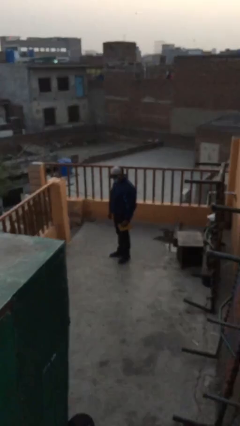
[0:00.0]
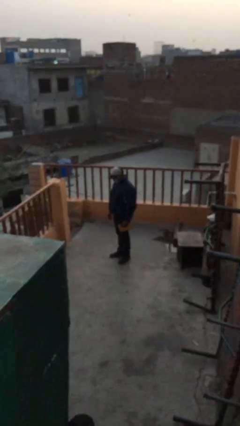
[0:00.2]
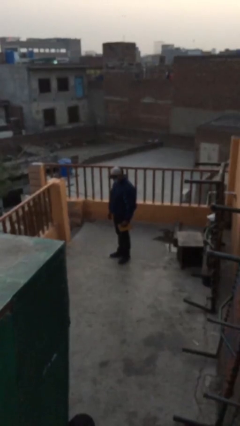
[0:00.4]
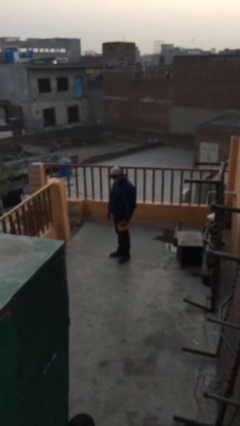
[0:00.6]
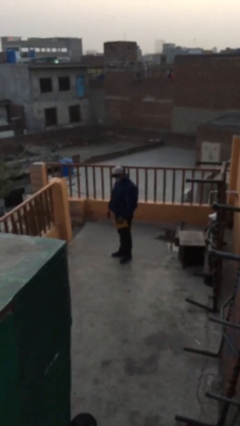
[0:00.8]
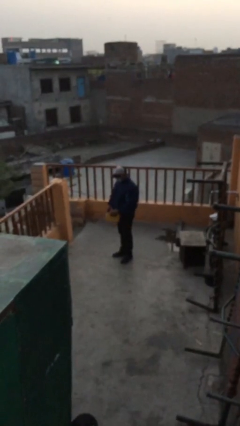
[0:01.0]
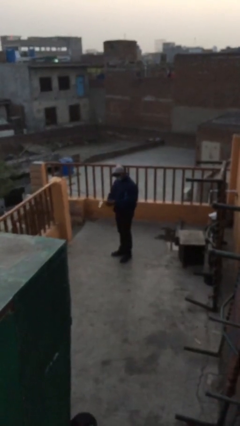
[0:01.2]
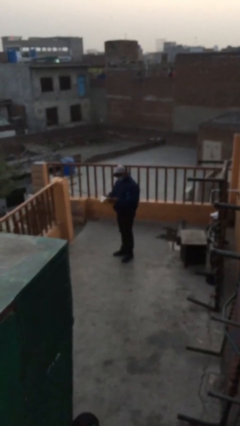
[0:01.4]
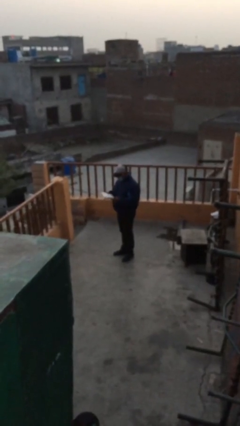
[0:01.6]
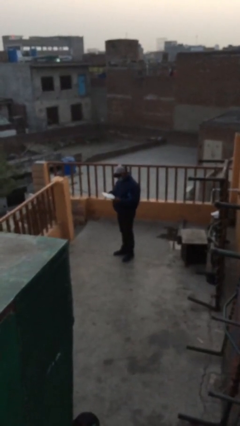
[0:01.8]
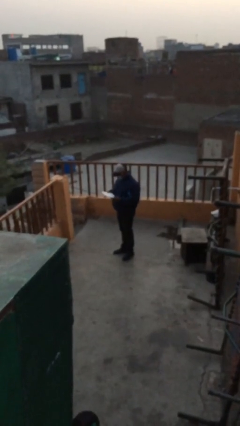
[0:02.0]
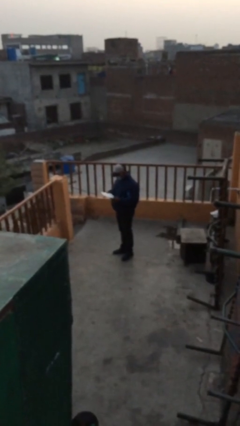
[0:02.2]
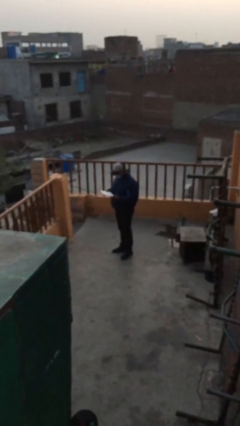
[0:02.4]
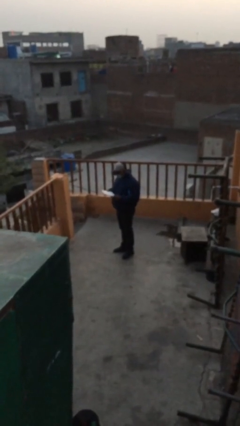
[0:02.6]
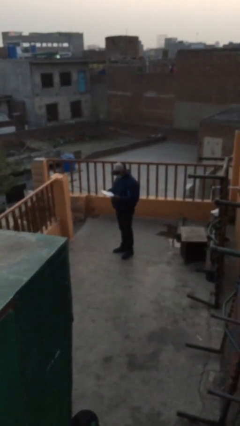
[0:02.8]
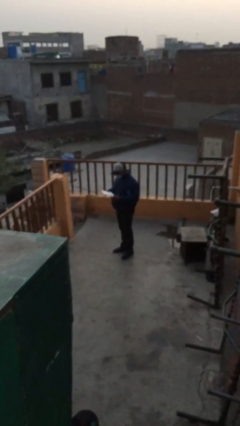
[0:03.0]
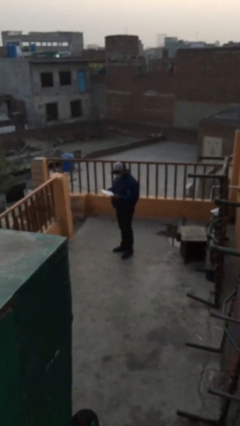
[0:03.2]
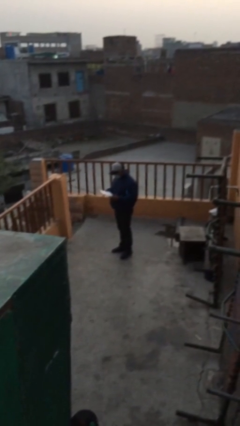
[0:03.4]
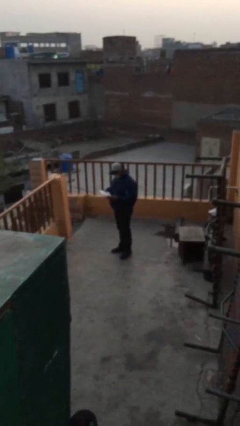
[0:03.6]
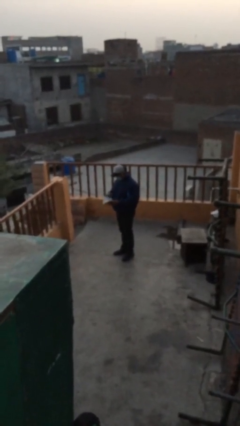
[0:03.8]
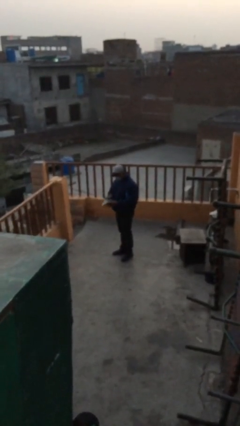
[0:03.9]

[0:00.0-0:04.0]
person reads document

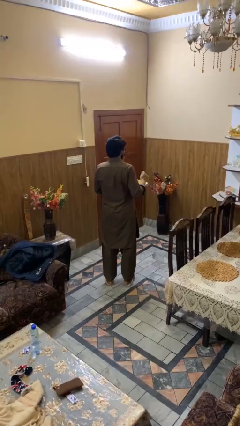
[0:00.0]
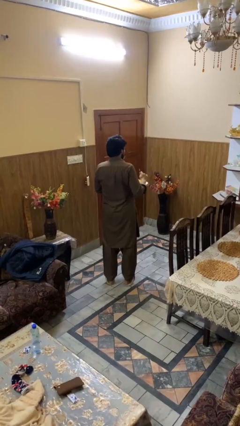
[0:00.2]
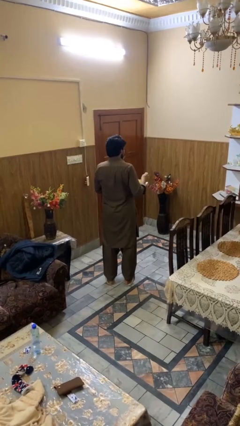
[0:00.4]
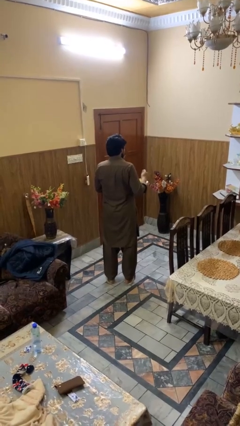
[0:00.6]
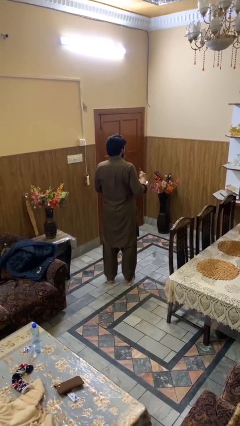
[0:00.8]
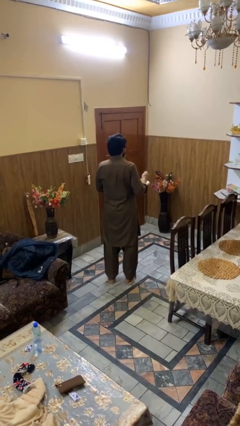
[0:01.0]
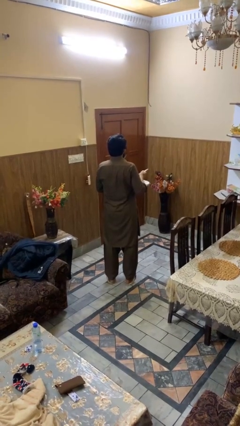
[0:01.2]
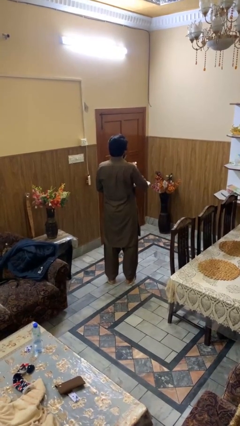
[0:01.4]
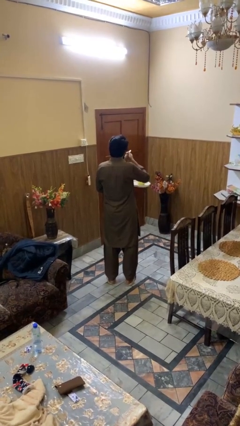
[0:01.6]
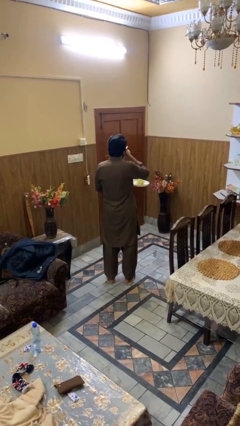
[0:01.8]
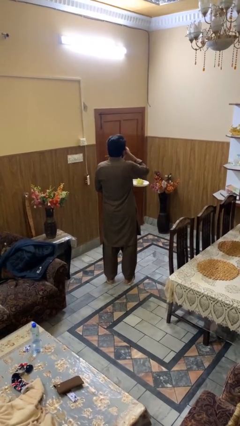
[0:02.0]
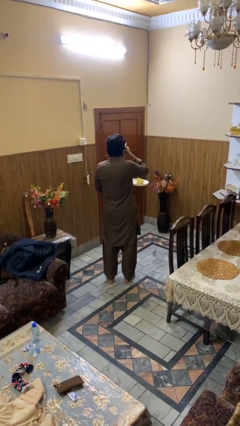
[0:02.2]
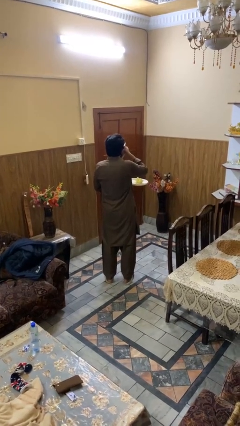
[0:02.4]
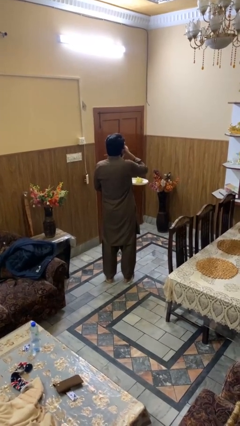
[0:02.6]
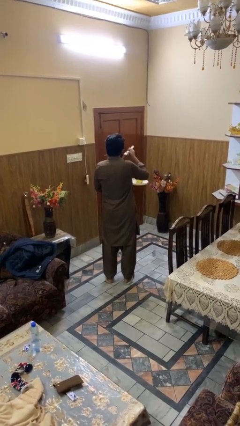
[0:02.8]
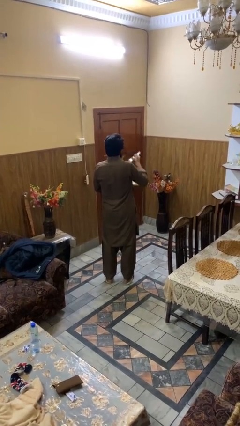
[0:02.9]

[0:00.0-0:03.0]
person eats with utensil

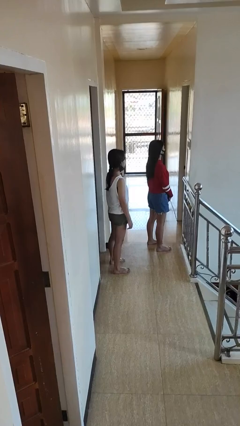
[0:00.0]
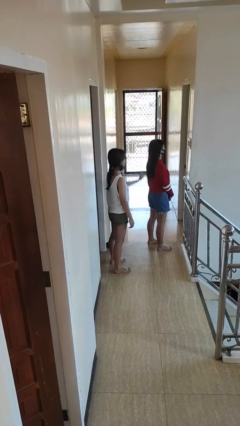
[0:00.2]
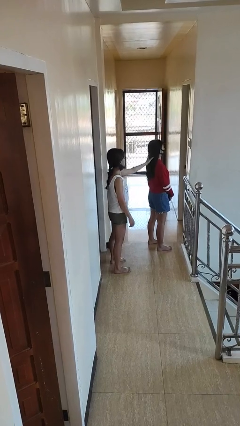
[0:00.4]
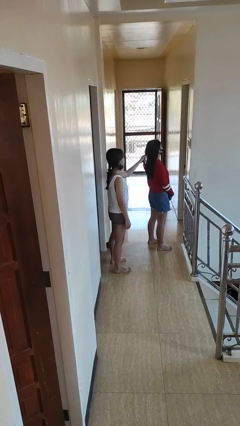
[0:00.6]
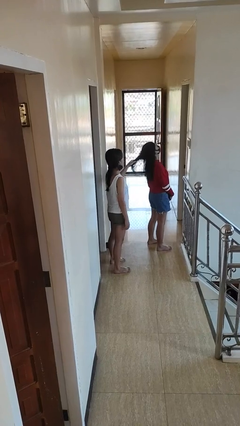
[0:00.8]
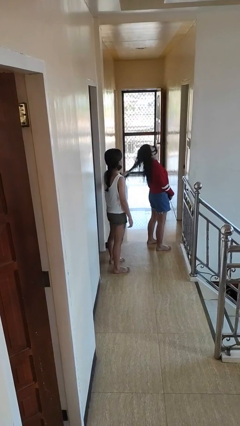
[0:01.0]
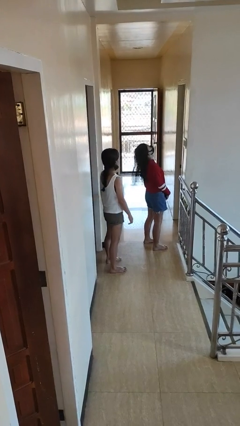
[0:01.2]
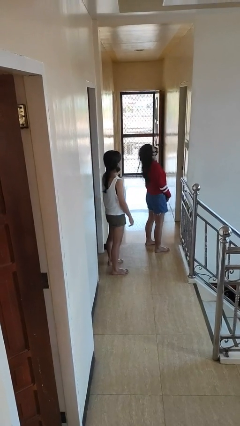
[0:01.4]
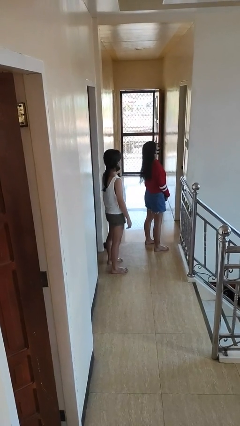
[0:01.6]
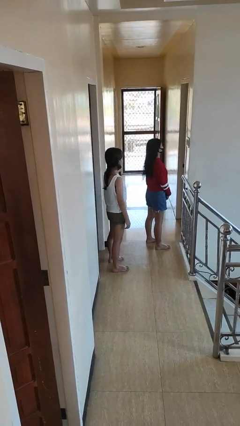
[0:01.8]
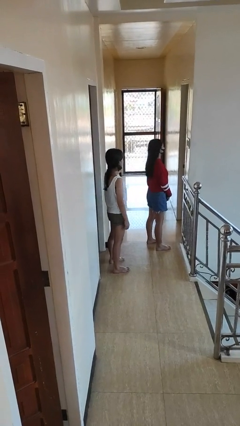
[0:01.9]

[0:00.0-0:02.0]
person grabs person by hair

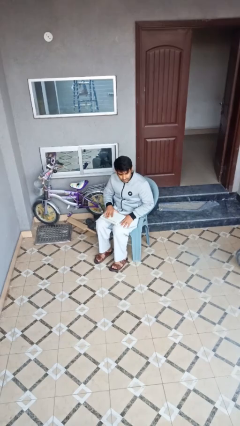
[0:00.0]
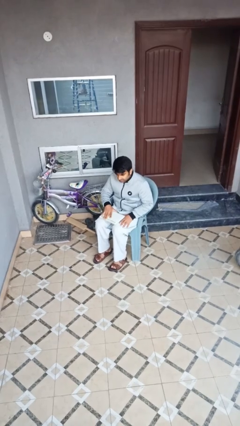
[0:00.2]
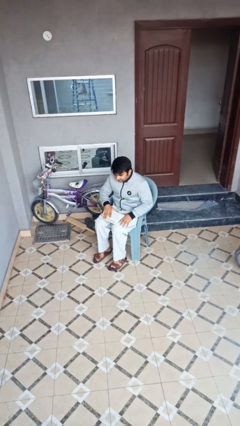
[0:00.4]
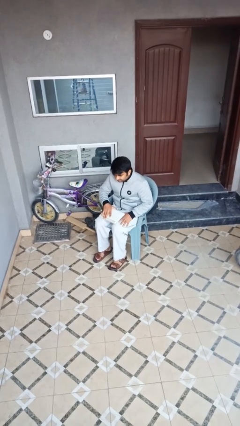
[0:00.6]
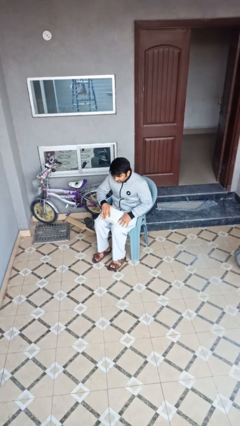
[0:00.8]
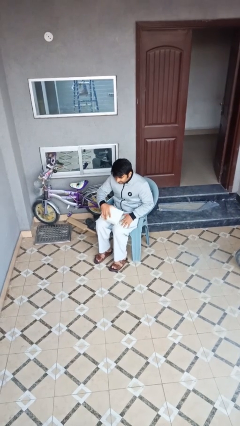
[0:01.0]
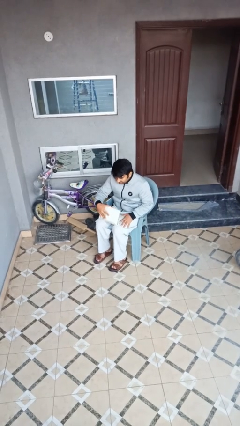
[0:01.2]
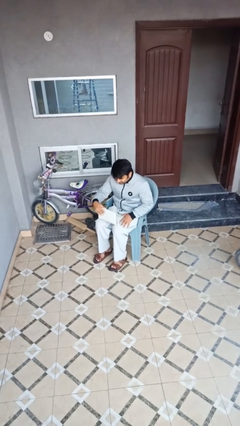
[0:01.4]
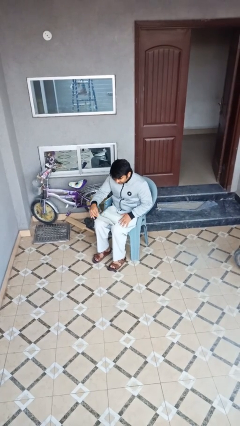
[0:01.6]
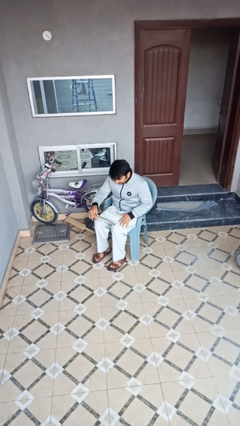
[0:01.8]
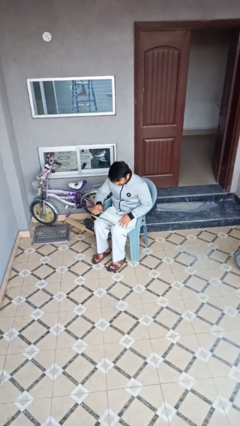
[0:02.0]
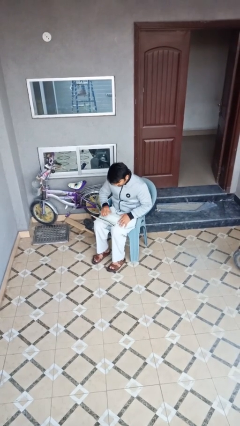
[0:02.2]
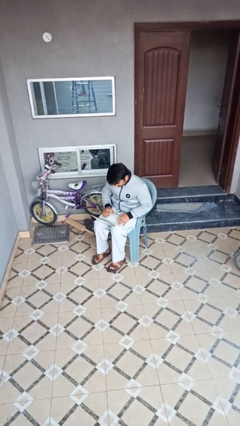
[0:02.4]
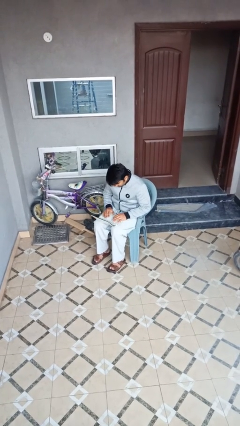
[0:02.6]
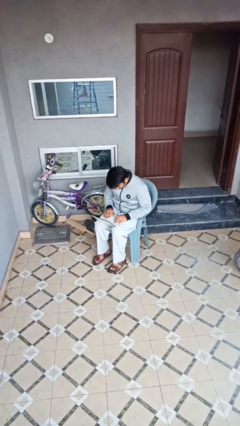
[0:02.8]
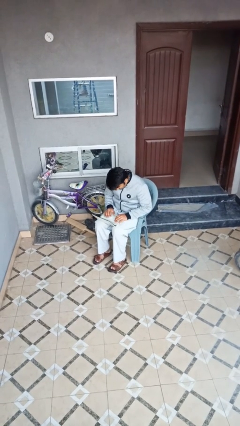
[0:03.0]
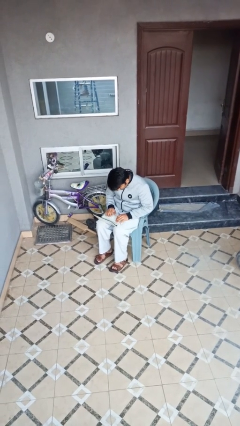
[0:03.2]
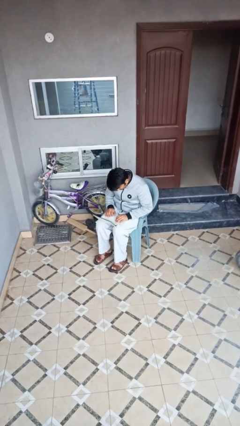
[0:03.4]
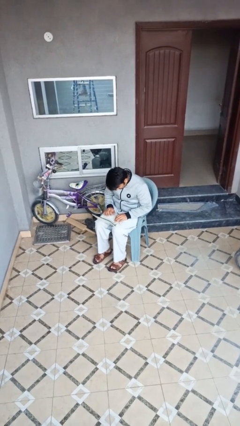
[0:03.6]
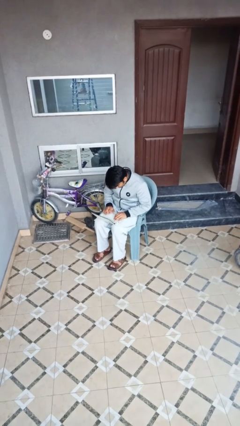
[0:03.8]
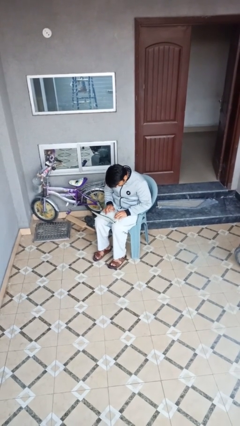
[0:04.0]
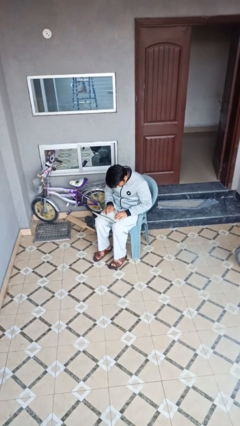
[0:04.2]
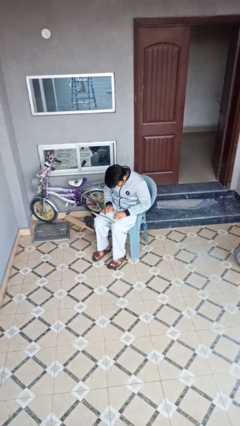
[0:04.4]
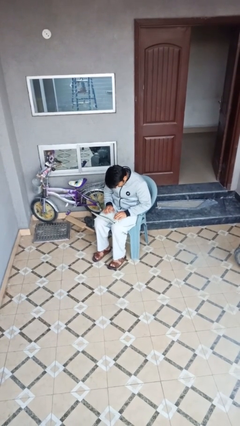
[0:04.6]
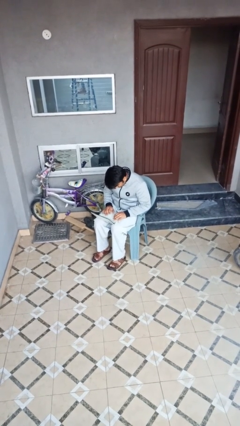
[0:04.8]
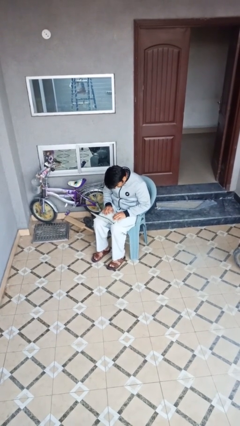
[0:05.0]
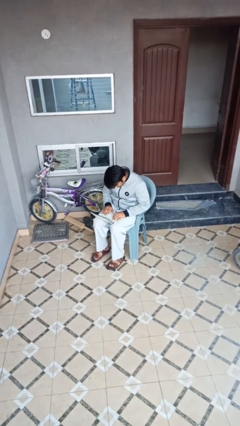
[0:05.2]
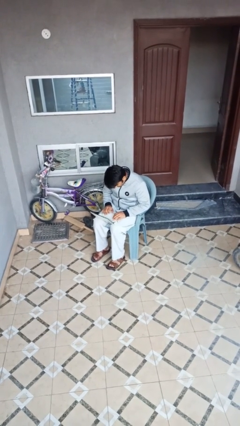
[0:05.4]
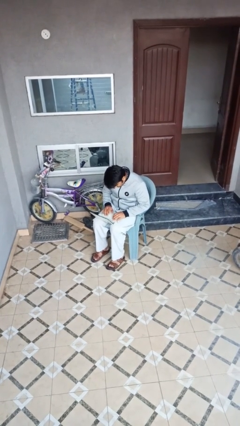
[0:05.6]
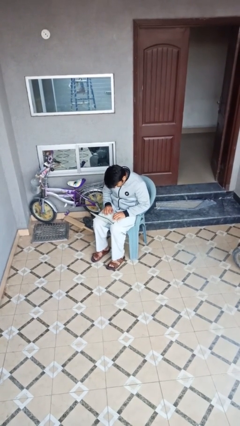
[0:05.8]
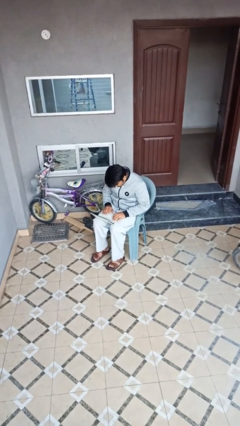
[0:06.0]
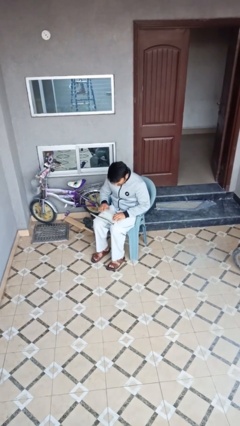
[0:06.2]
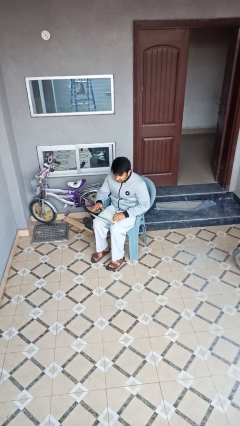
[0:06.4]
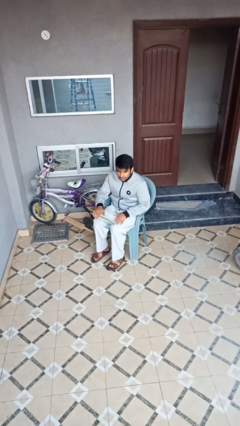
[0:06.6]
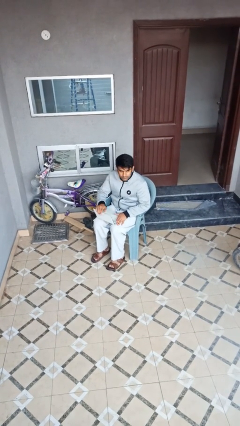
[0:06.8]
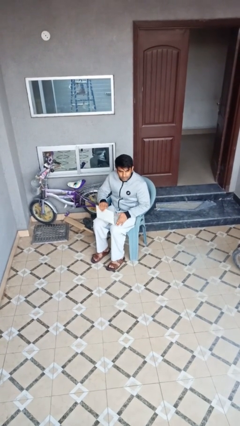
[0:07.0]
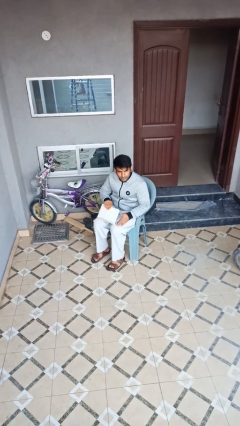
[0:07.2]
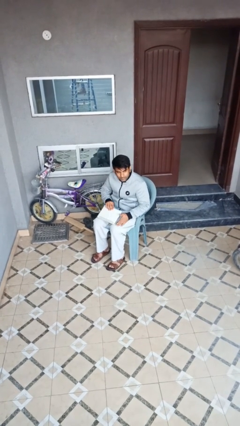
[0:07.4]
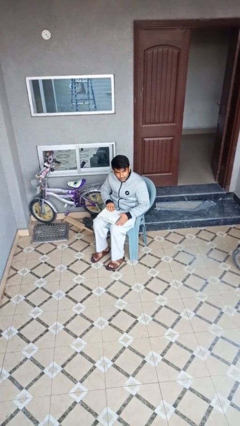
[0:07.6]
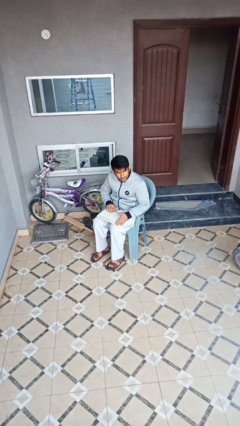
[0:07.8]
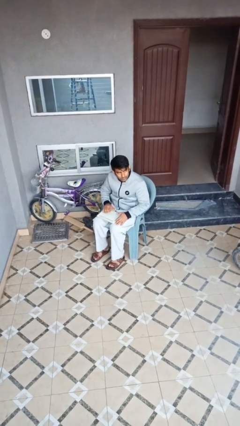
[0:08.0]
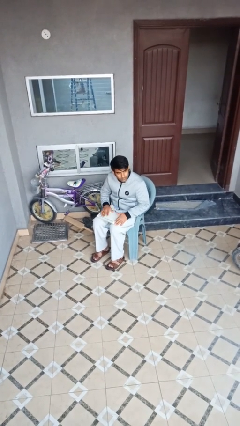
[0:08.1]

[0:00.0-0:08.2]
person interacts with laptop

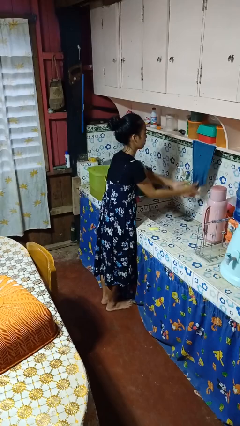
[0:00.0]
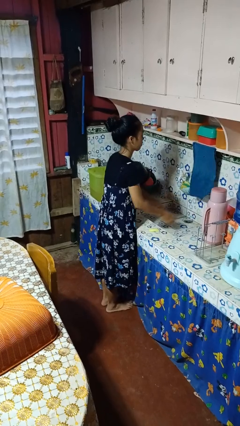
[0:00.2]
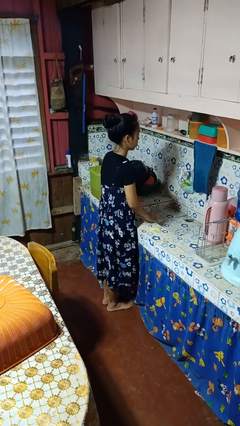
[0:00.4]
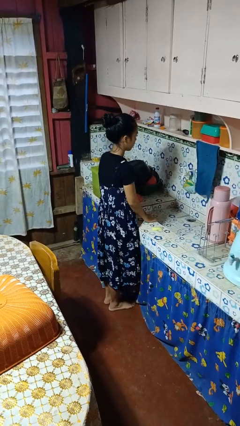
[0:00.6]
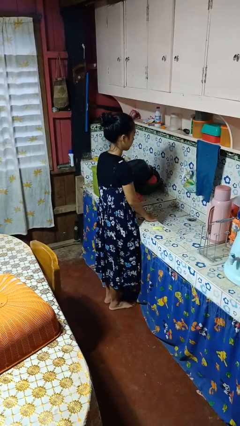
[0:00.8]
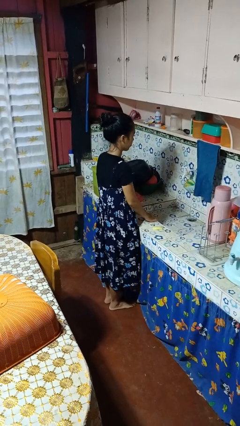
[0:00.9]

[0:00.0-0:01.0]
person dries hands with towel
